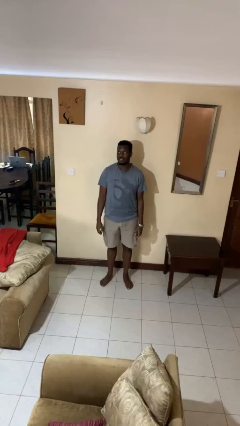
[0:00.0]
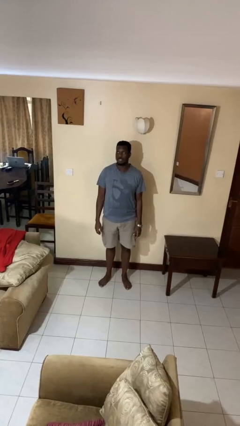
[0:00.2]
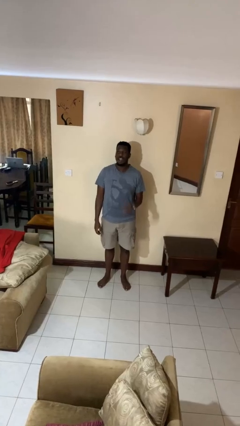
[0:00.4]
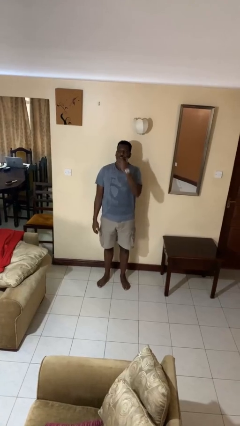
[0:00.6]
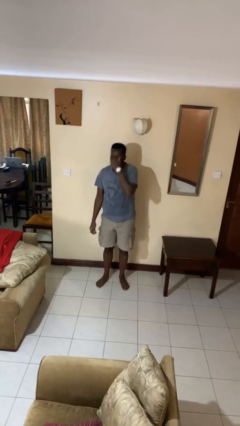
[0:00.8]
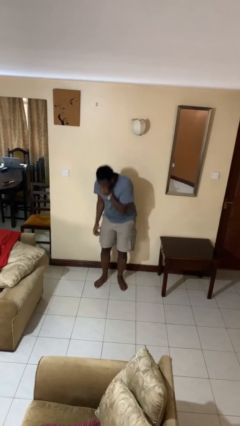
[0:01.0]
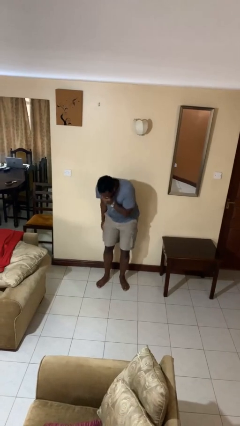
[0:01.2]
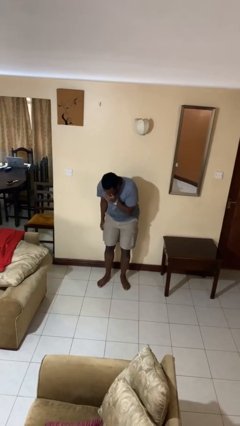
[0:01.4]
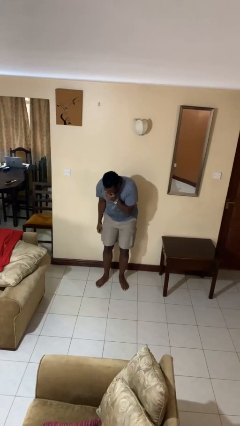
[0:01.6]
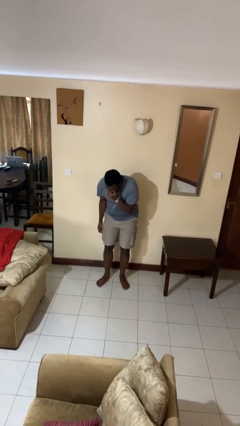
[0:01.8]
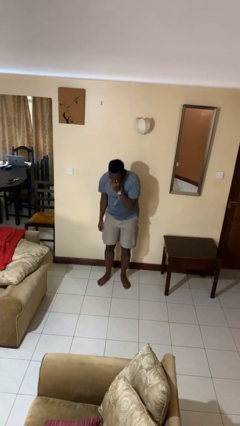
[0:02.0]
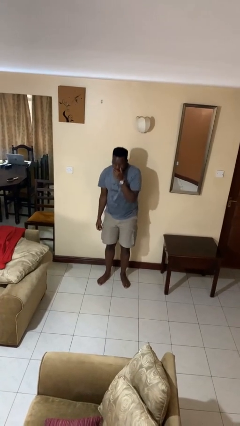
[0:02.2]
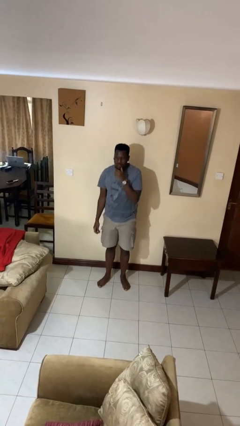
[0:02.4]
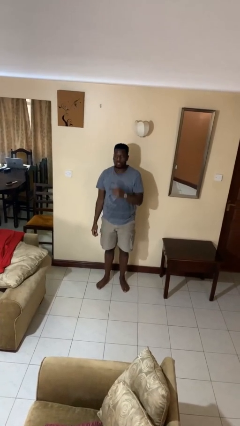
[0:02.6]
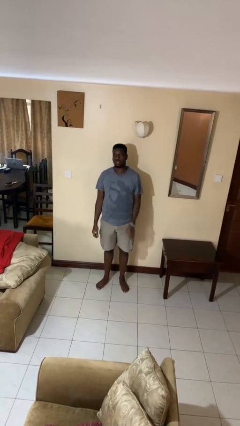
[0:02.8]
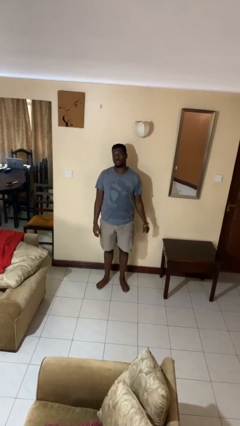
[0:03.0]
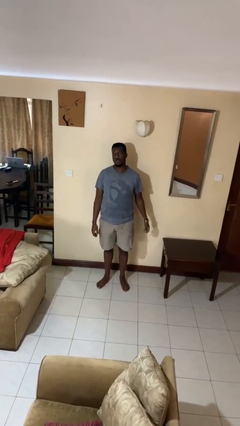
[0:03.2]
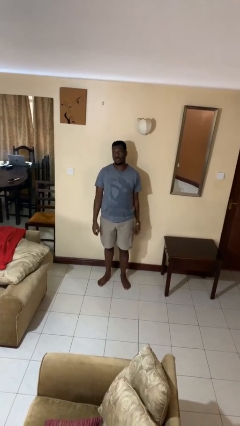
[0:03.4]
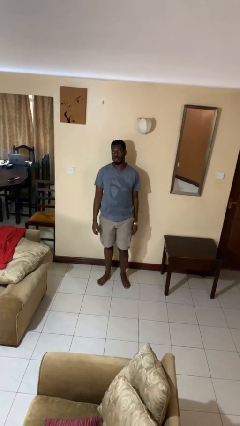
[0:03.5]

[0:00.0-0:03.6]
person sneezes into hand

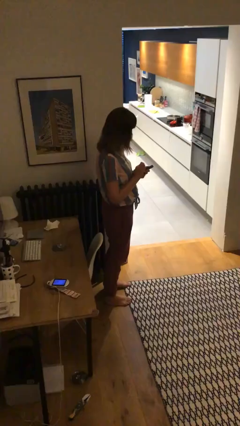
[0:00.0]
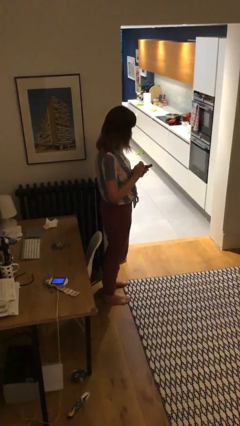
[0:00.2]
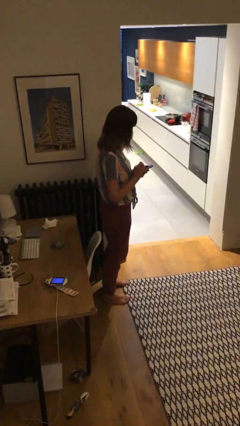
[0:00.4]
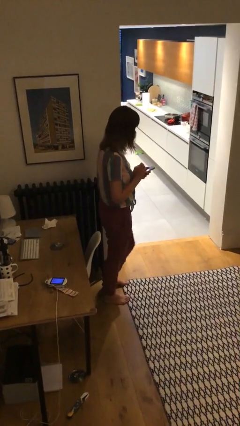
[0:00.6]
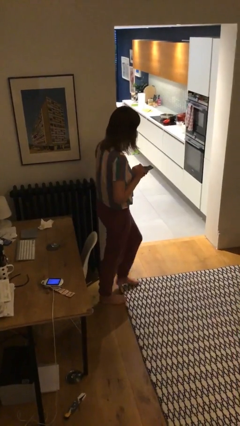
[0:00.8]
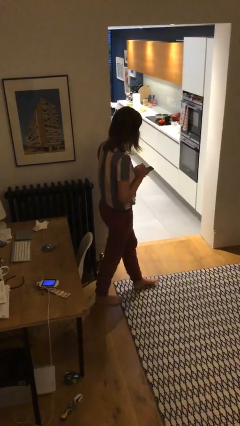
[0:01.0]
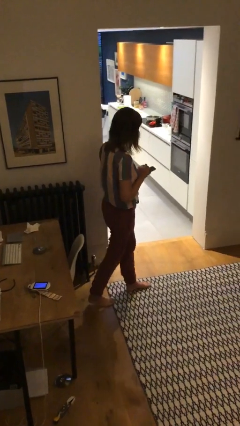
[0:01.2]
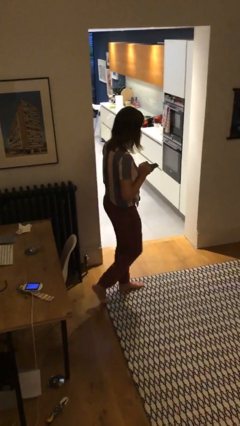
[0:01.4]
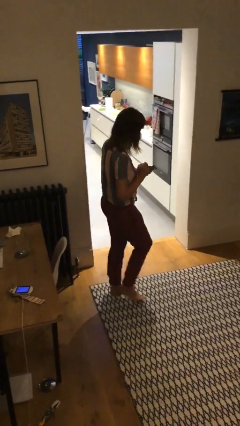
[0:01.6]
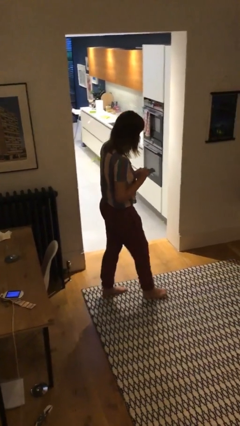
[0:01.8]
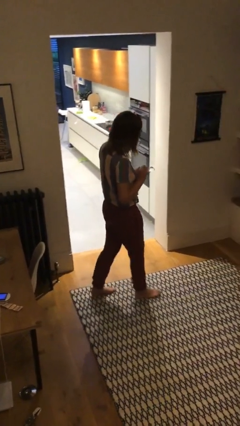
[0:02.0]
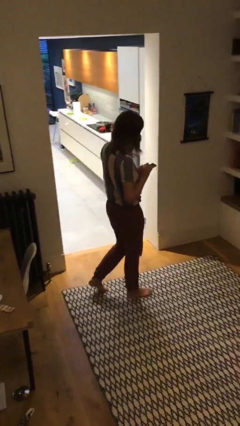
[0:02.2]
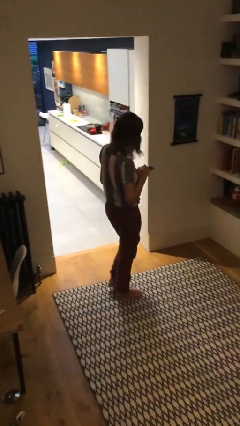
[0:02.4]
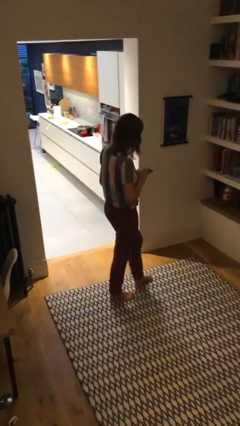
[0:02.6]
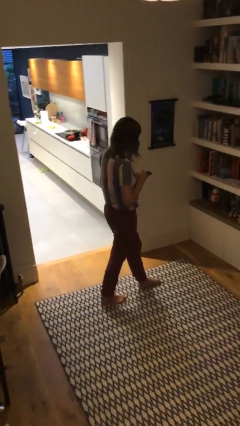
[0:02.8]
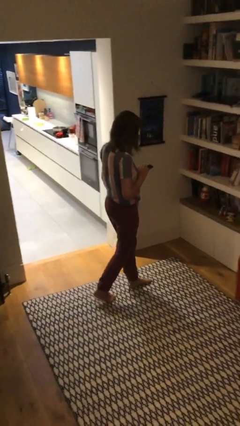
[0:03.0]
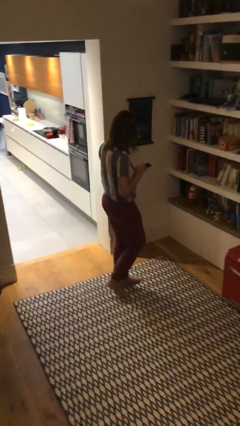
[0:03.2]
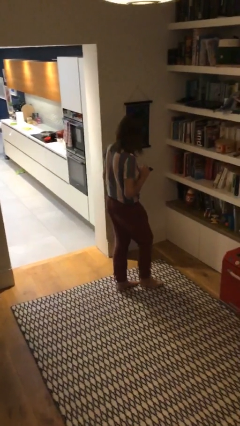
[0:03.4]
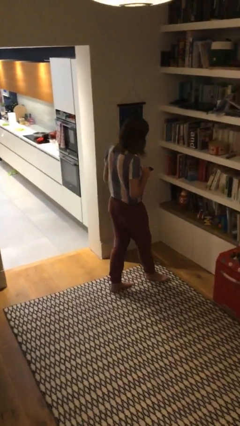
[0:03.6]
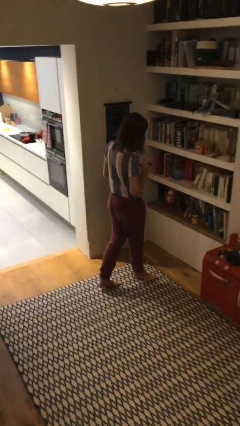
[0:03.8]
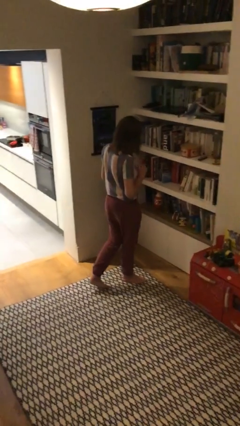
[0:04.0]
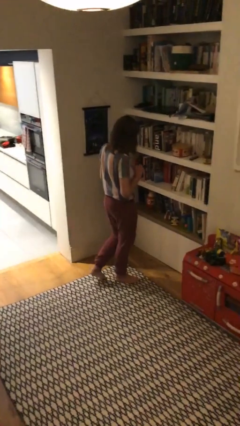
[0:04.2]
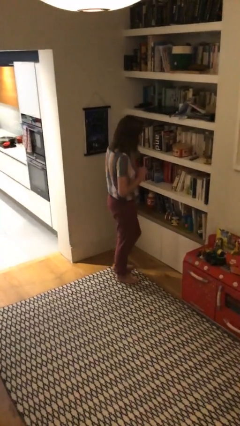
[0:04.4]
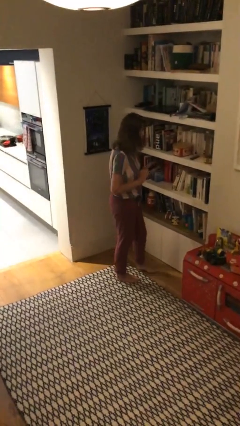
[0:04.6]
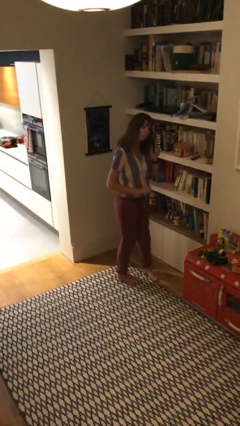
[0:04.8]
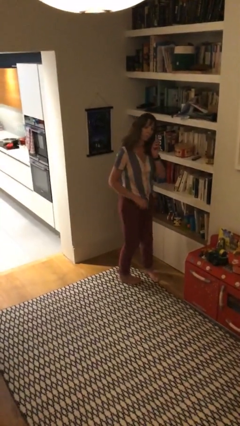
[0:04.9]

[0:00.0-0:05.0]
person texts on phone

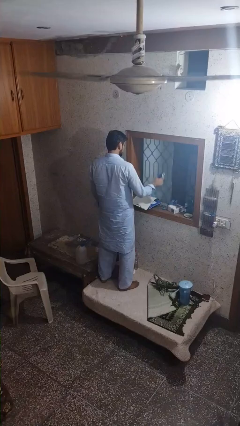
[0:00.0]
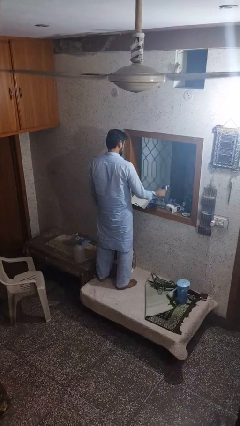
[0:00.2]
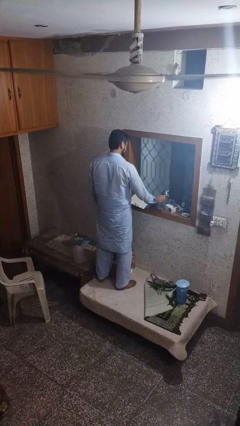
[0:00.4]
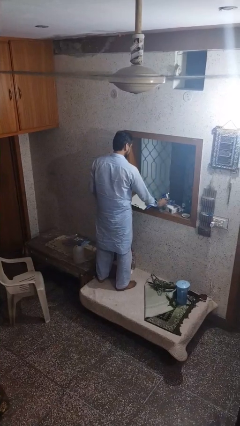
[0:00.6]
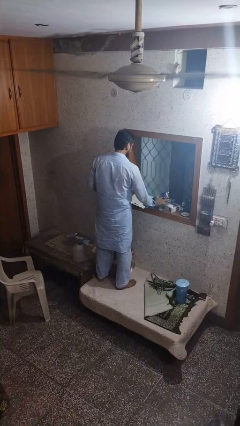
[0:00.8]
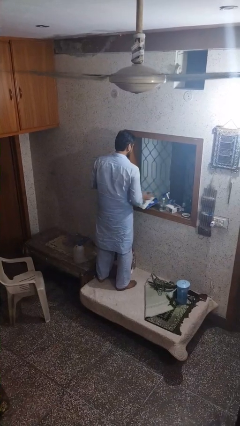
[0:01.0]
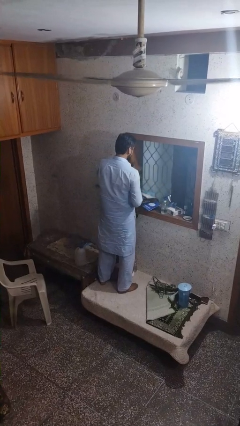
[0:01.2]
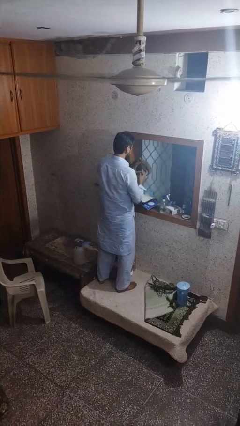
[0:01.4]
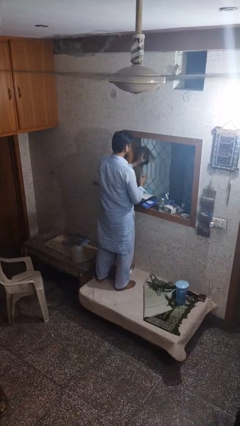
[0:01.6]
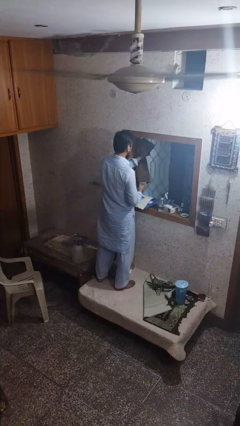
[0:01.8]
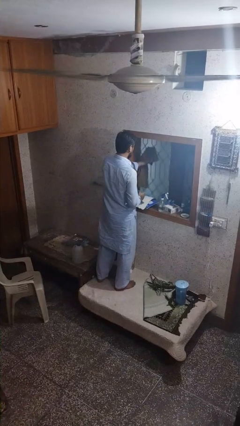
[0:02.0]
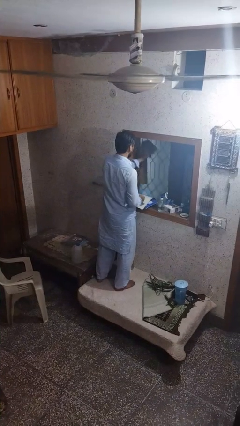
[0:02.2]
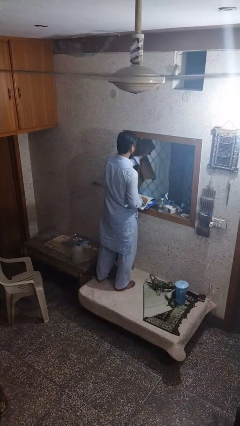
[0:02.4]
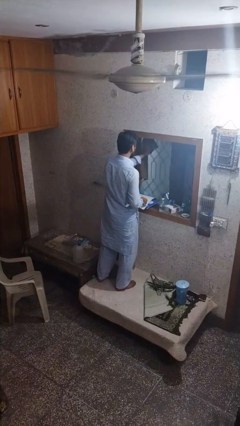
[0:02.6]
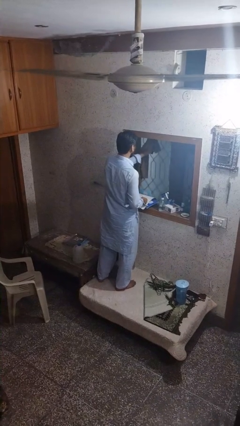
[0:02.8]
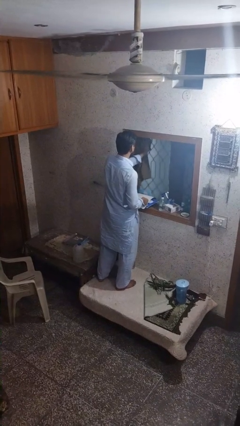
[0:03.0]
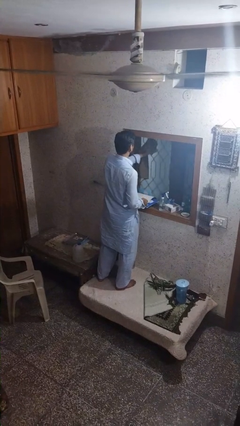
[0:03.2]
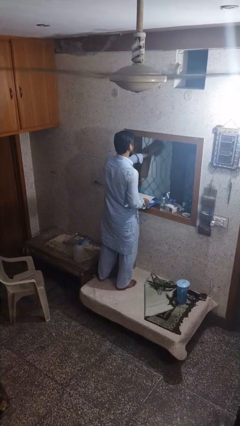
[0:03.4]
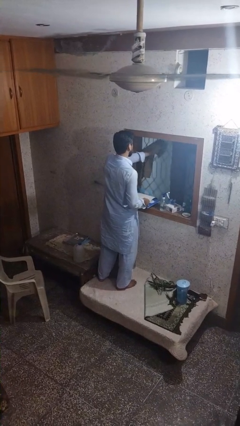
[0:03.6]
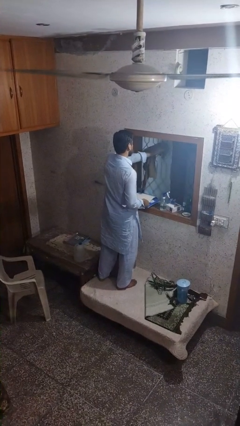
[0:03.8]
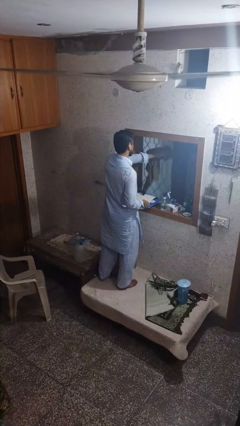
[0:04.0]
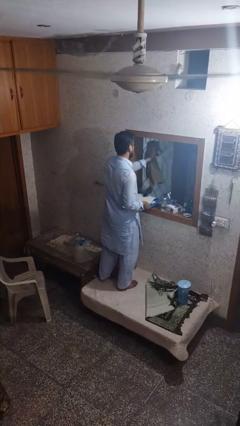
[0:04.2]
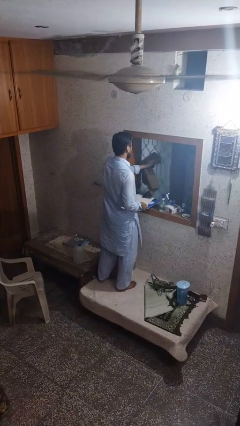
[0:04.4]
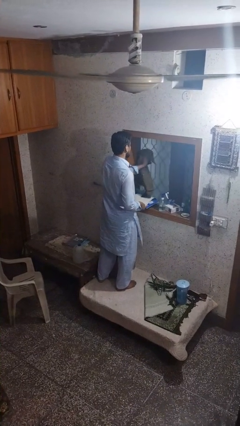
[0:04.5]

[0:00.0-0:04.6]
person washes window

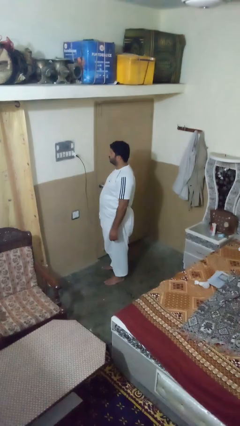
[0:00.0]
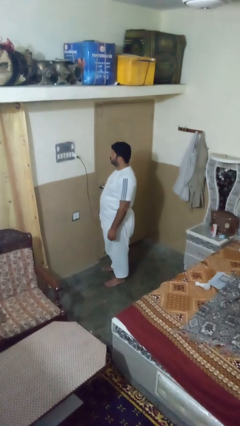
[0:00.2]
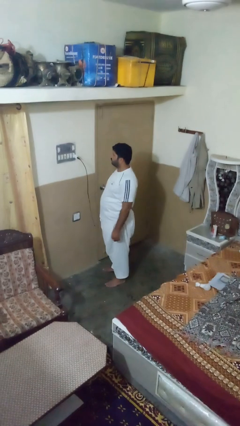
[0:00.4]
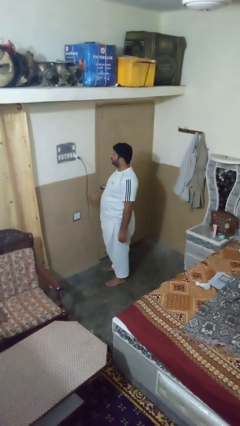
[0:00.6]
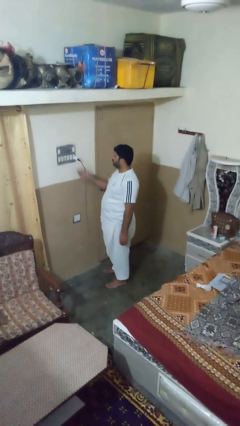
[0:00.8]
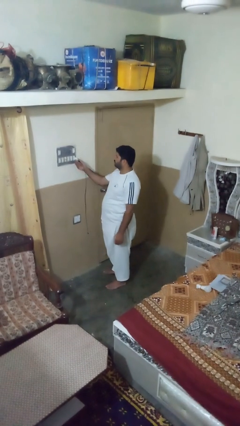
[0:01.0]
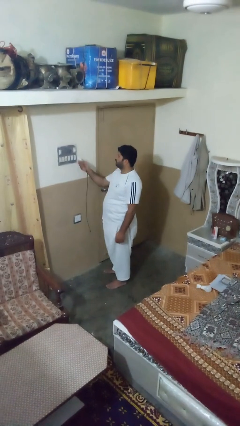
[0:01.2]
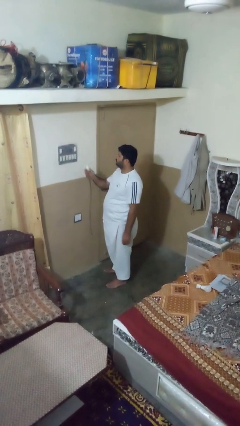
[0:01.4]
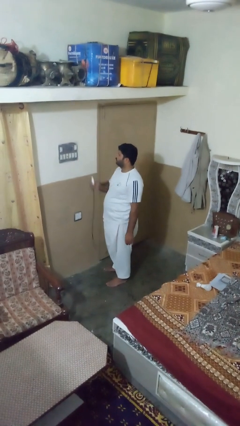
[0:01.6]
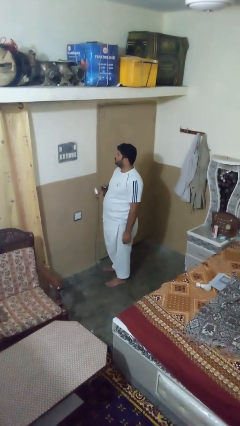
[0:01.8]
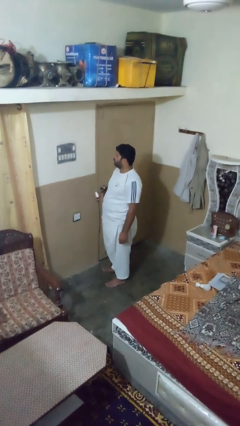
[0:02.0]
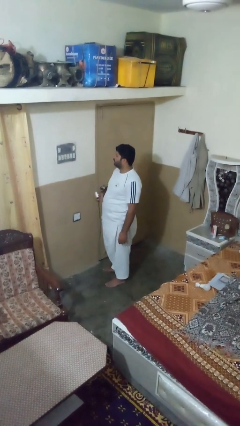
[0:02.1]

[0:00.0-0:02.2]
person unplugs from electrical socket

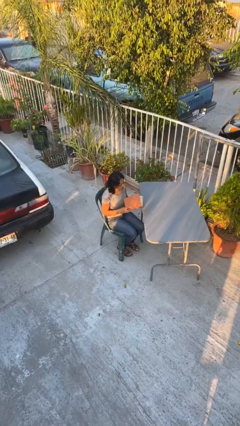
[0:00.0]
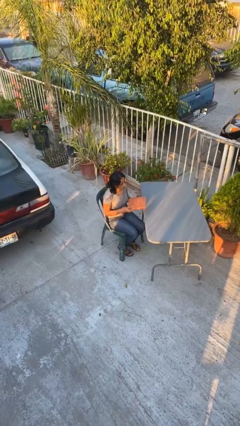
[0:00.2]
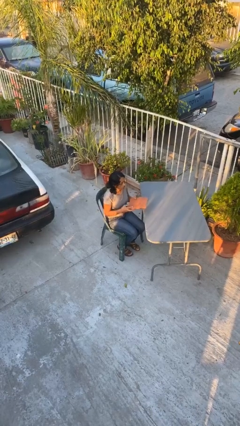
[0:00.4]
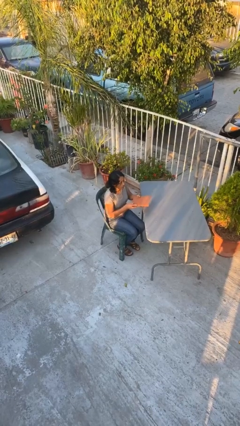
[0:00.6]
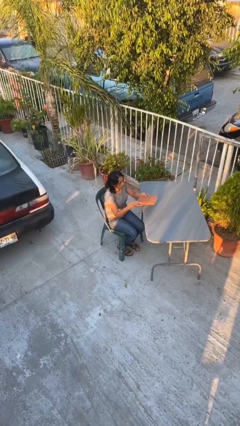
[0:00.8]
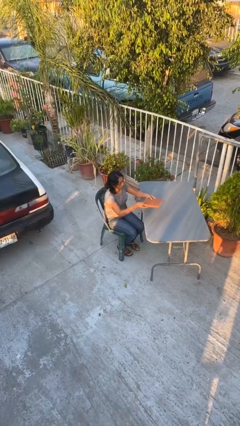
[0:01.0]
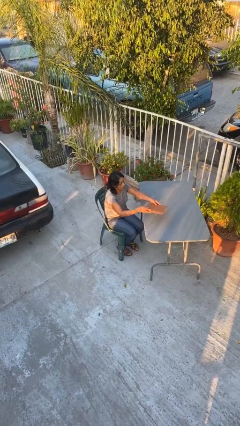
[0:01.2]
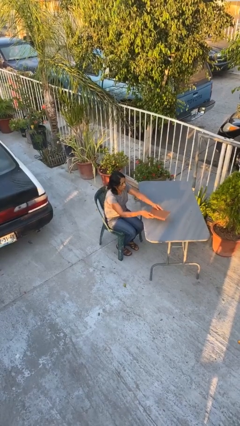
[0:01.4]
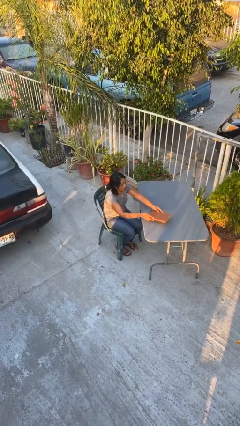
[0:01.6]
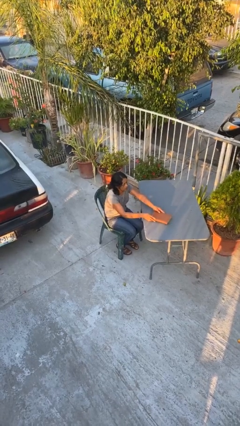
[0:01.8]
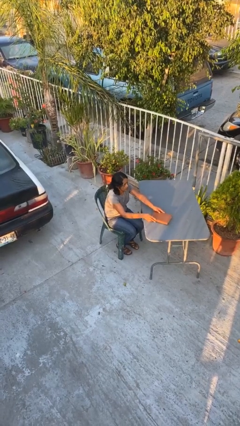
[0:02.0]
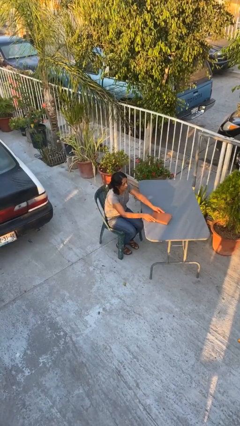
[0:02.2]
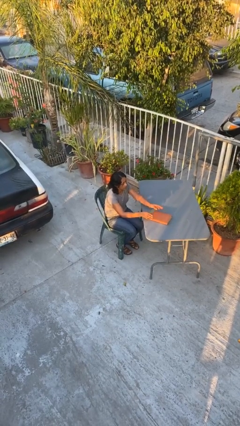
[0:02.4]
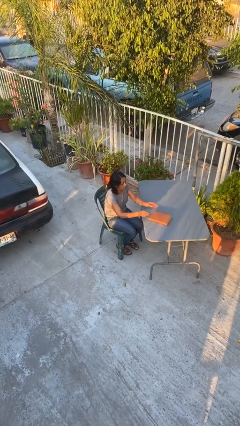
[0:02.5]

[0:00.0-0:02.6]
person puts down object on table
